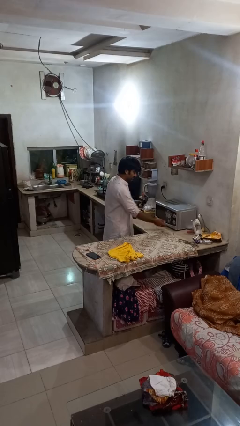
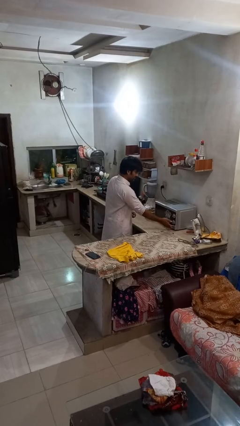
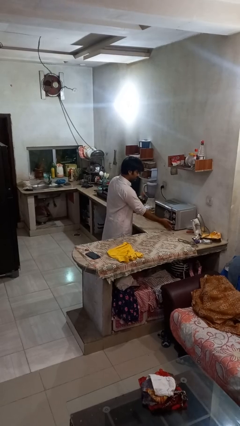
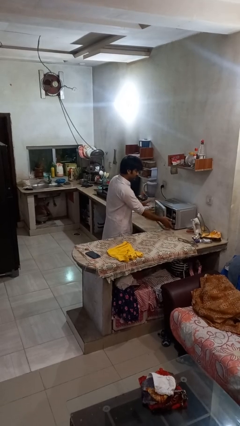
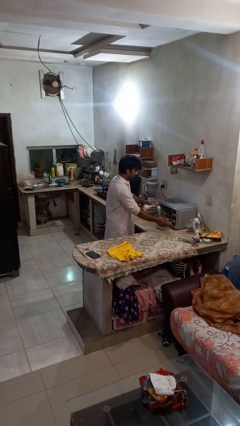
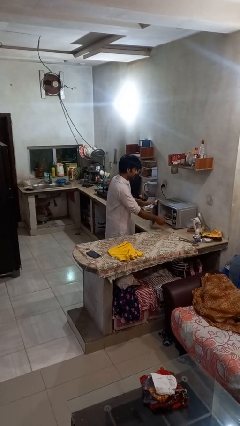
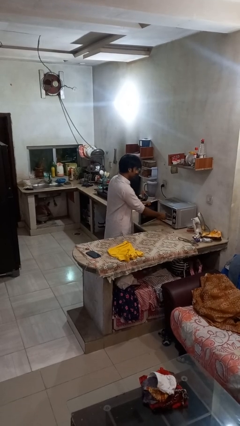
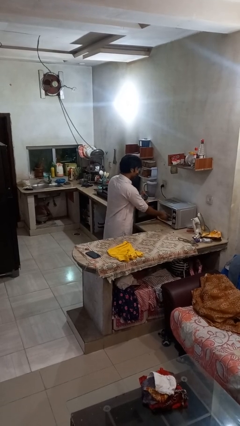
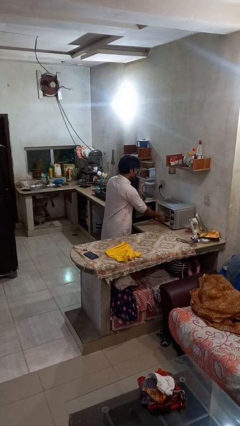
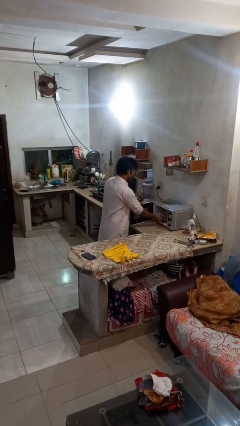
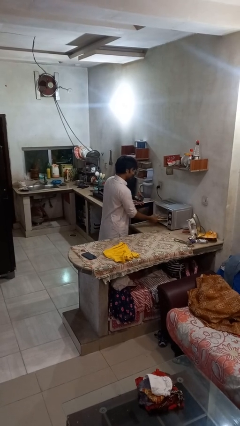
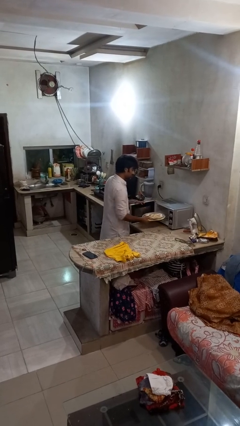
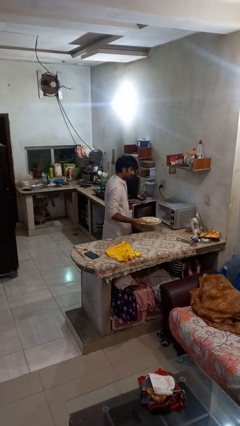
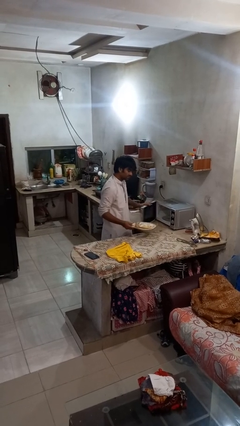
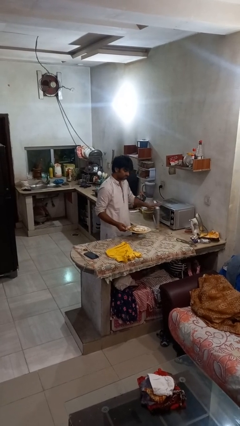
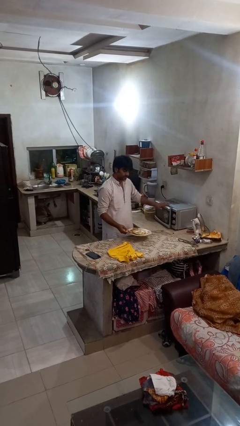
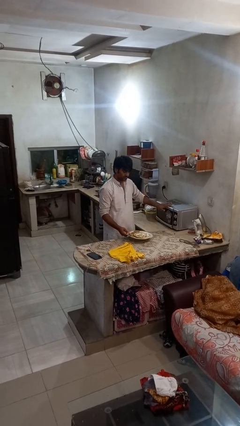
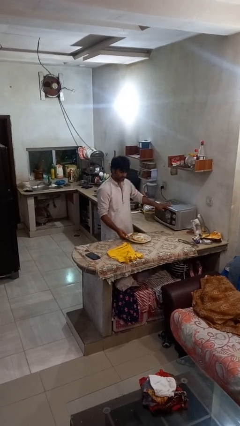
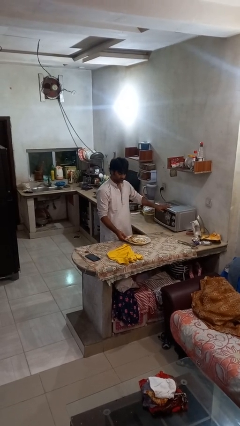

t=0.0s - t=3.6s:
person takes object from microwave

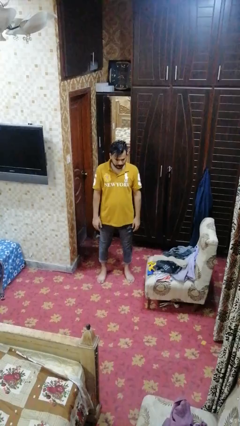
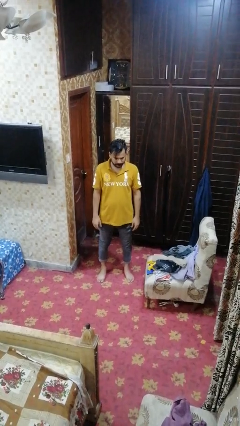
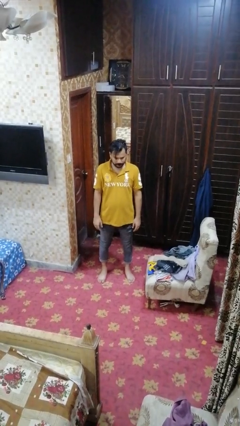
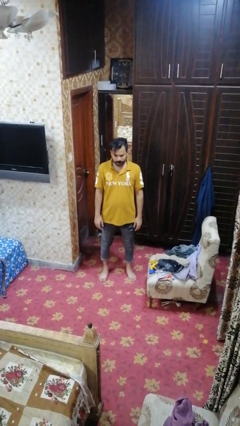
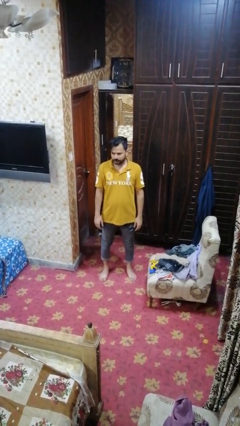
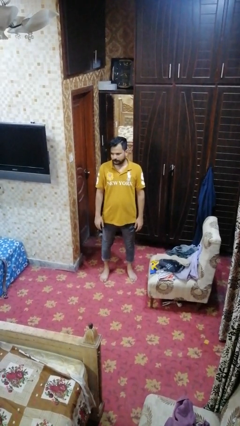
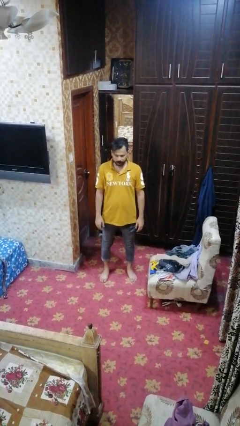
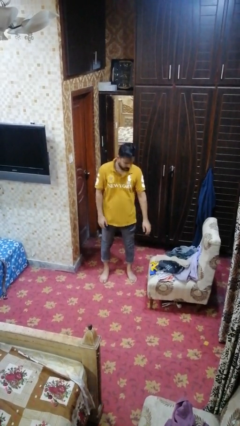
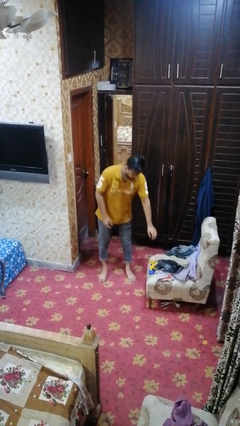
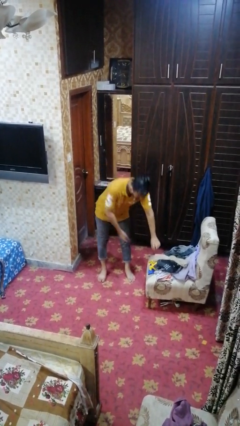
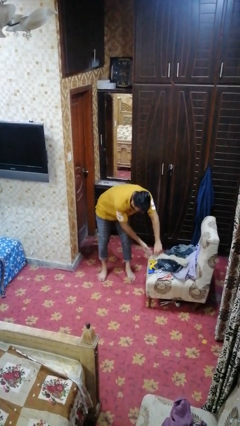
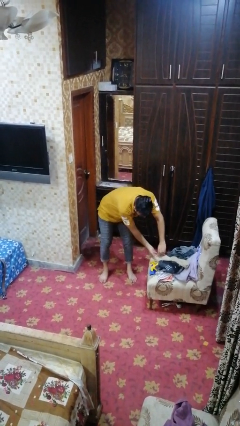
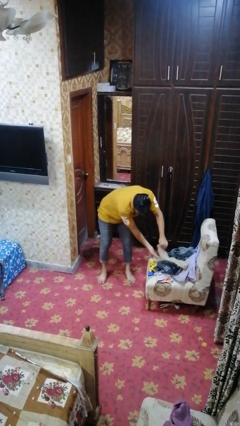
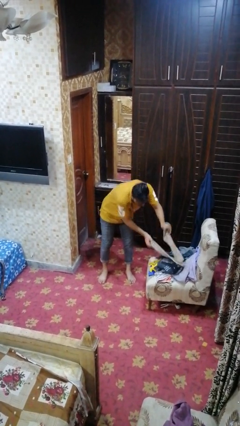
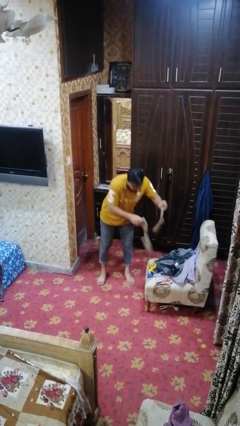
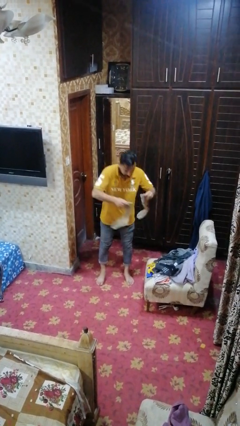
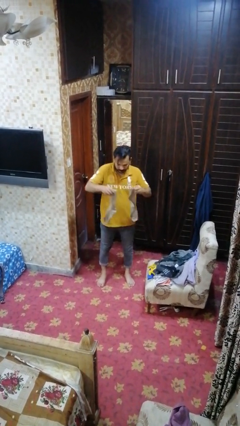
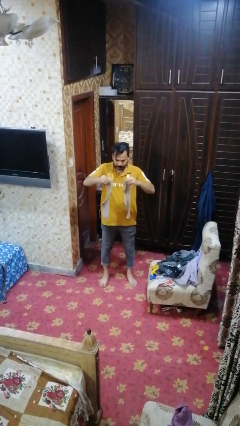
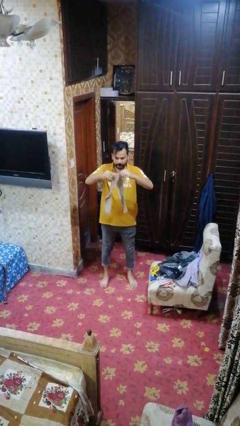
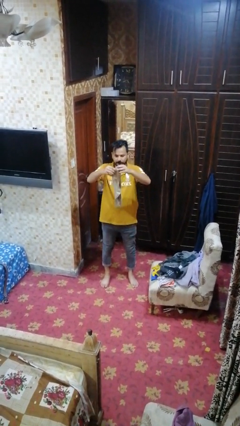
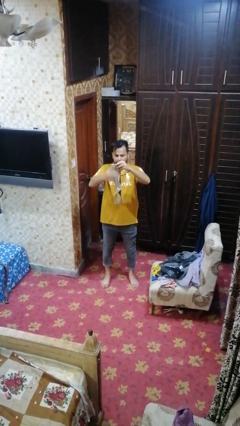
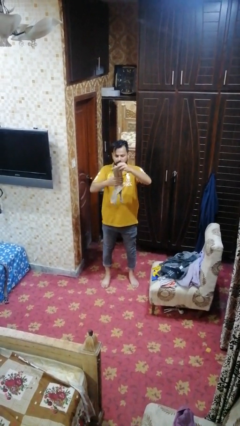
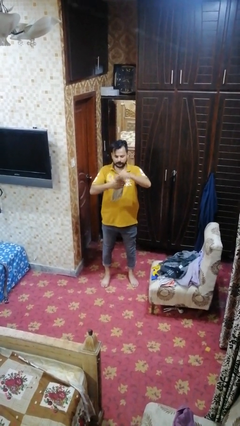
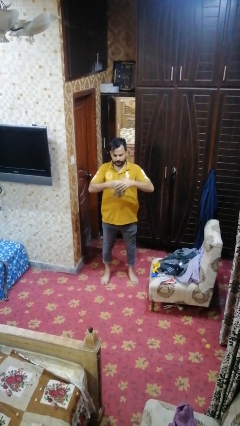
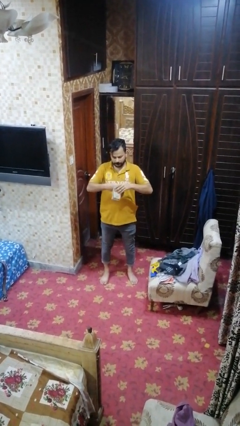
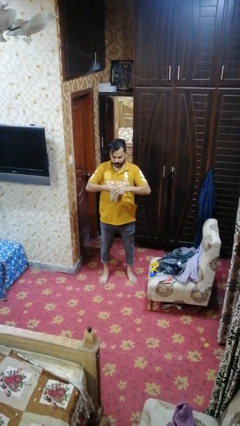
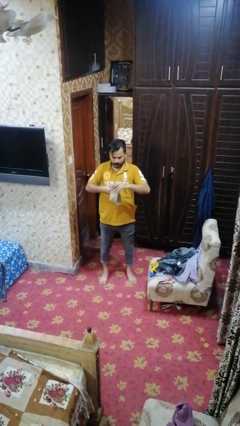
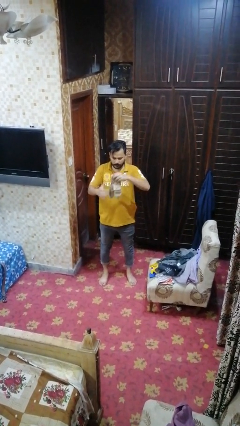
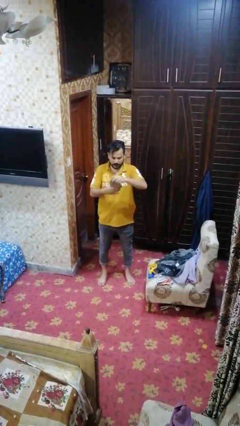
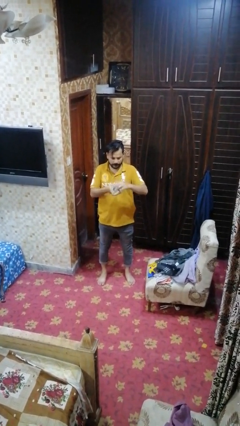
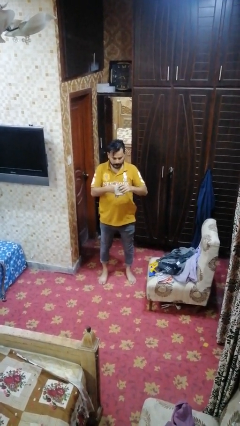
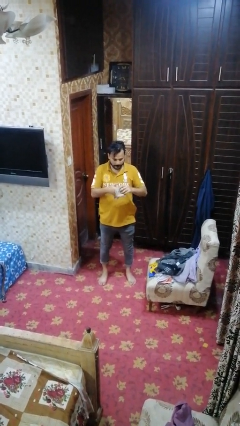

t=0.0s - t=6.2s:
person folds socks

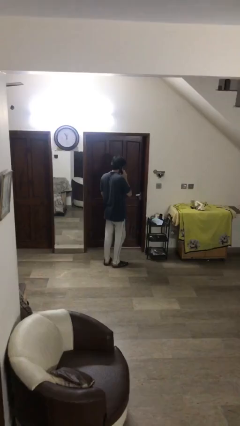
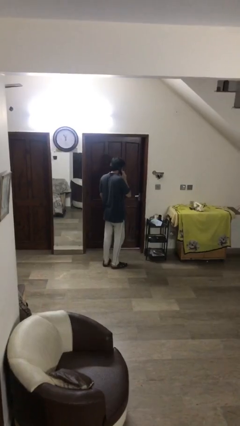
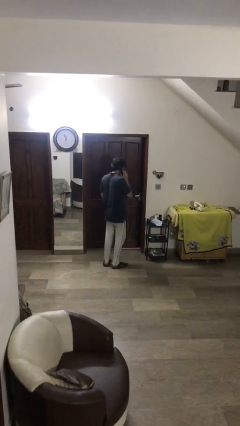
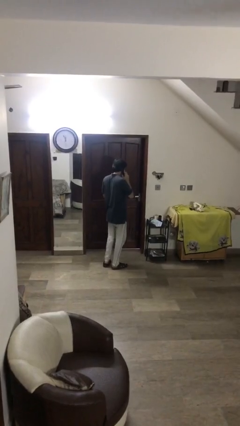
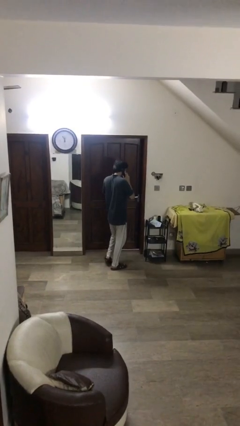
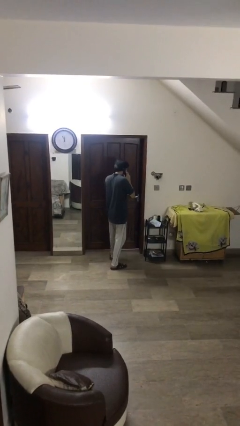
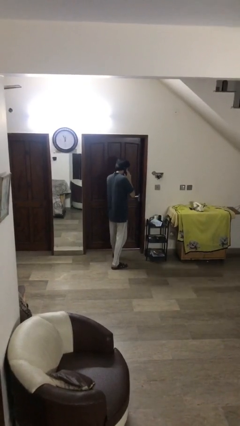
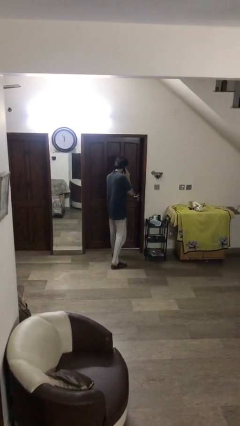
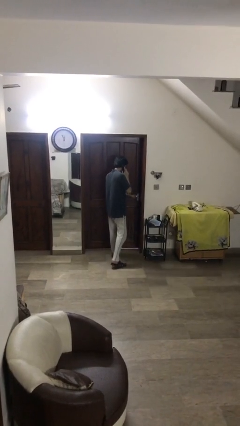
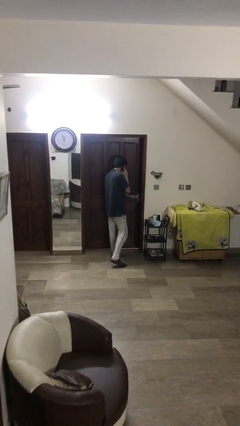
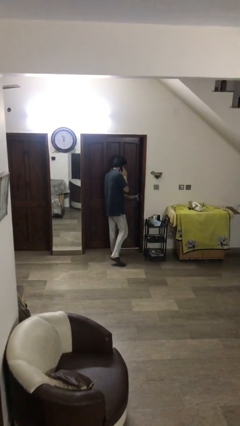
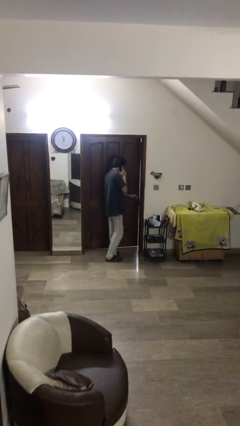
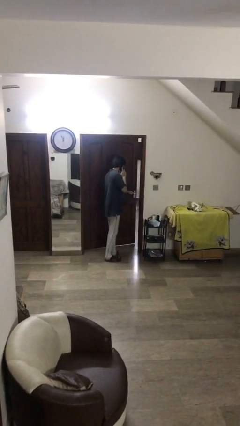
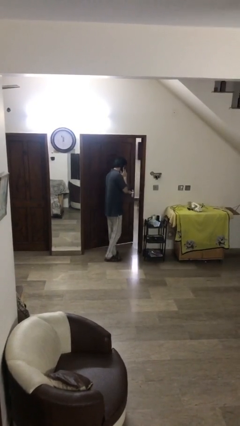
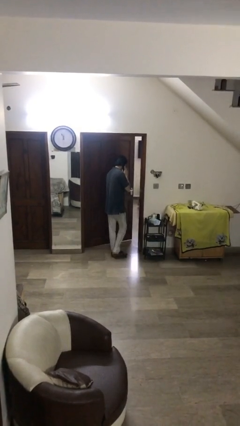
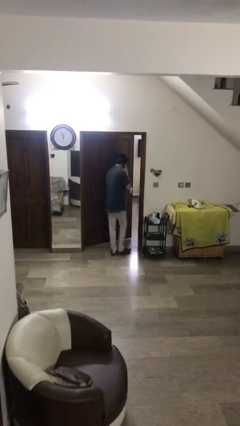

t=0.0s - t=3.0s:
person opens facility door

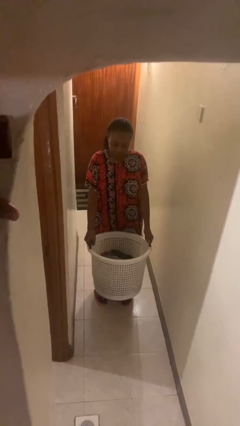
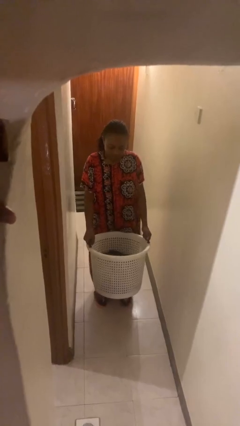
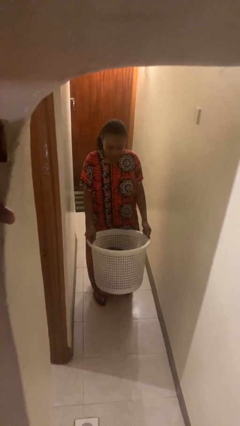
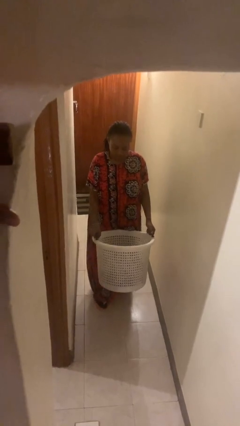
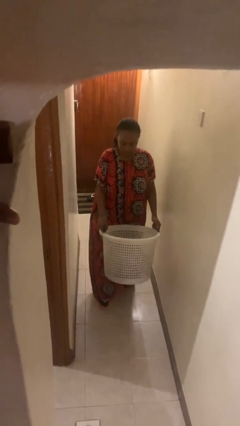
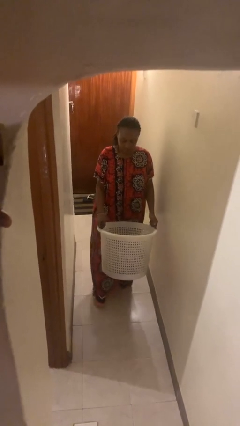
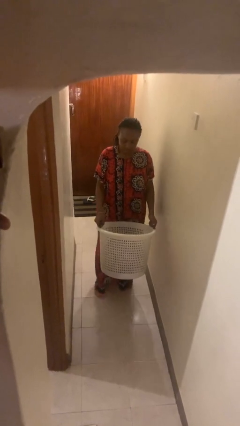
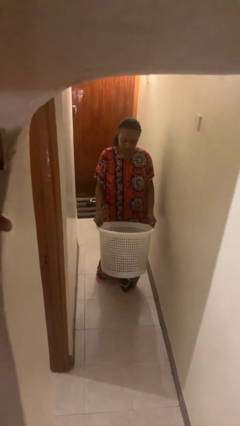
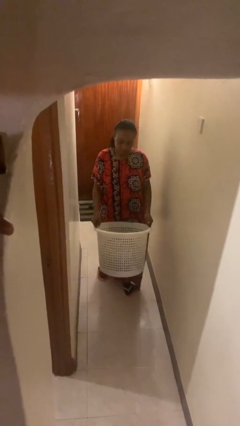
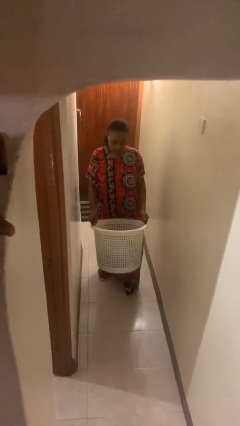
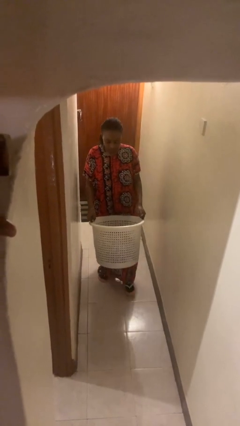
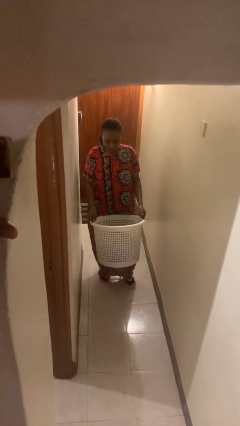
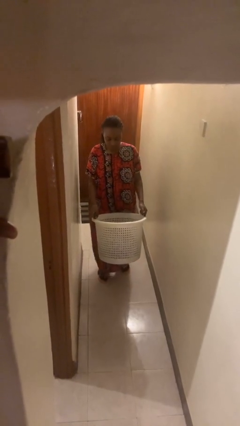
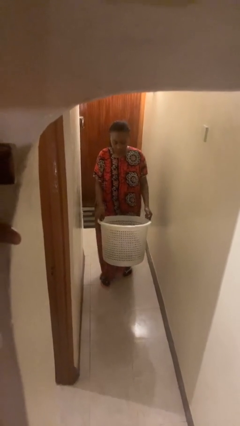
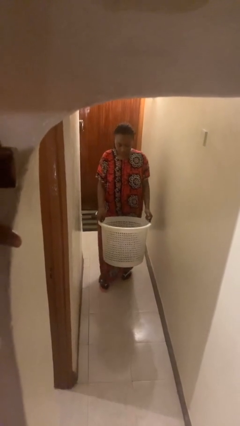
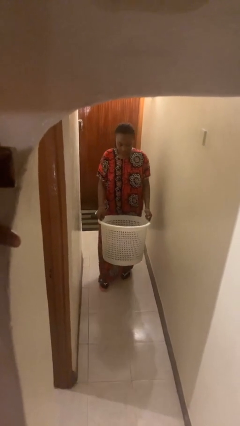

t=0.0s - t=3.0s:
person carries laundry basket

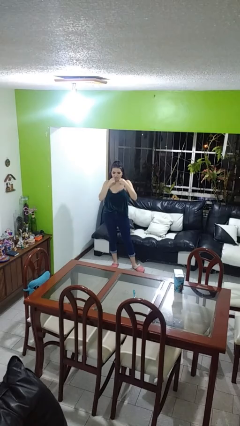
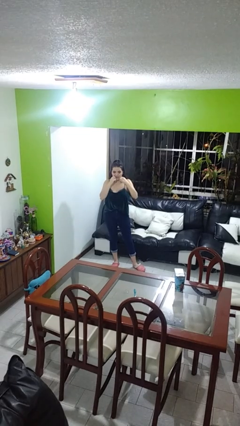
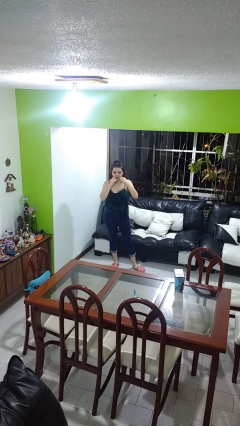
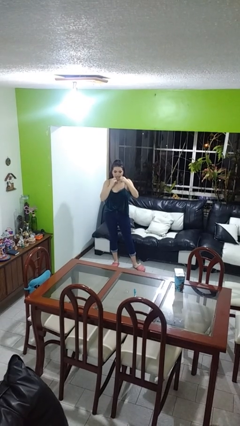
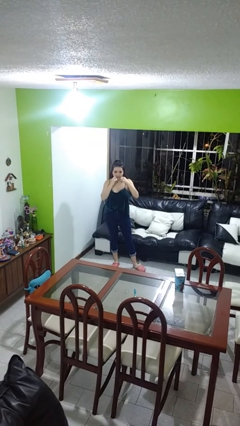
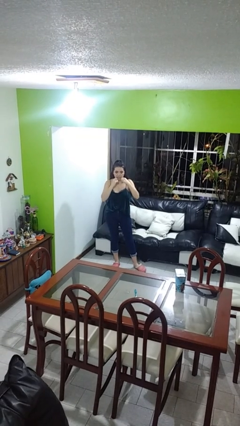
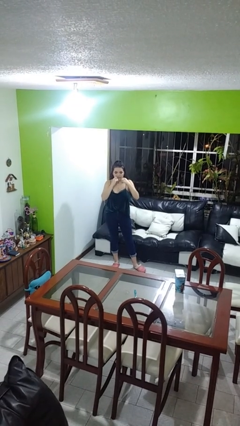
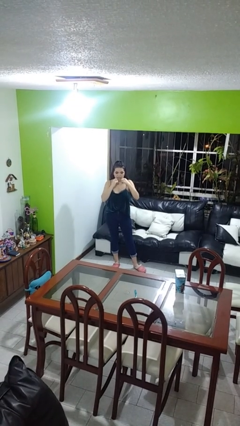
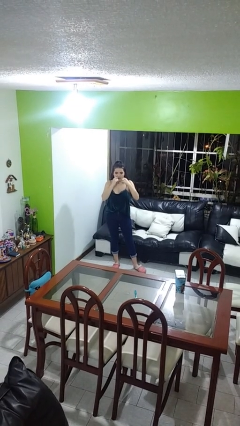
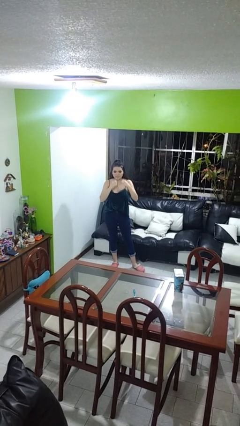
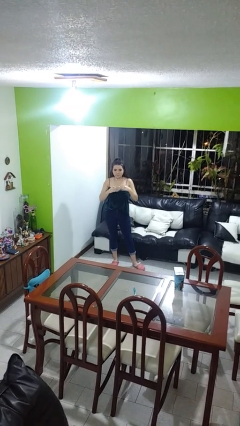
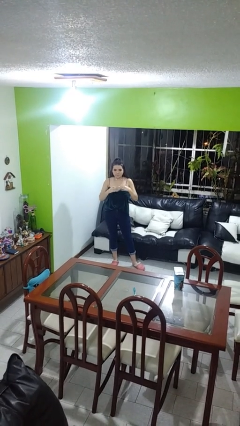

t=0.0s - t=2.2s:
person flosses
